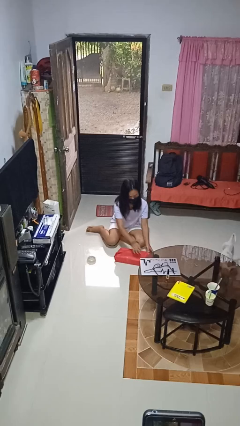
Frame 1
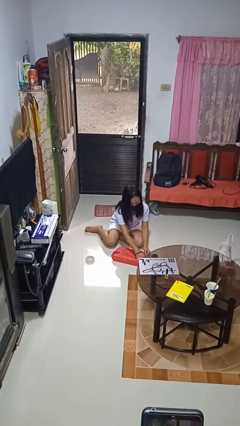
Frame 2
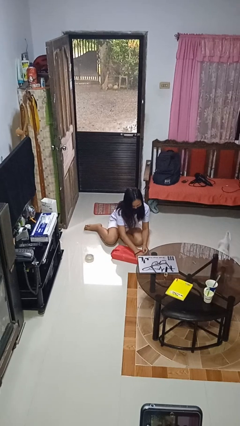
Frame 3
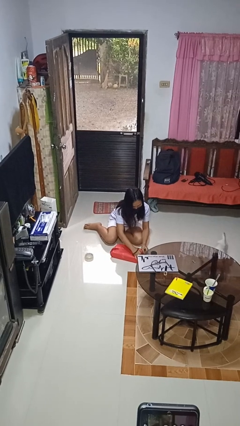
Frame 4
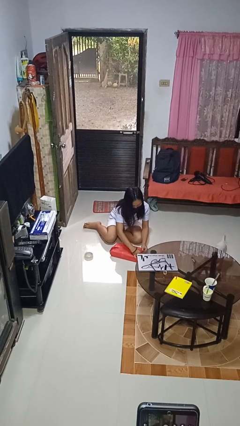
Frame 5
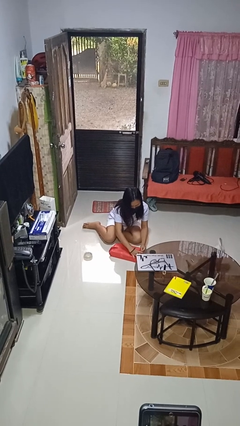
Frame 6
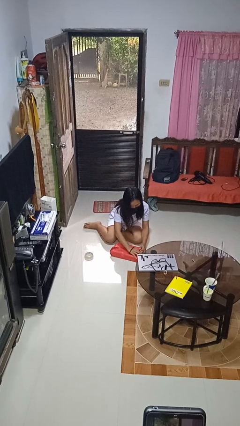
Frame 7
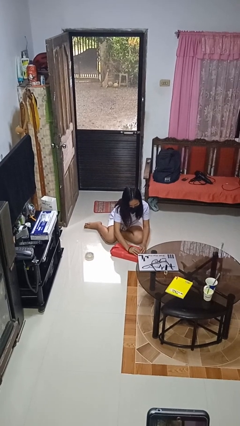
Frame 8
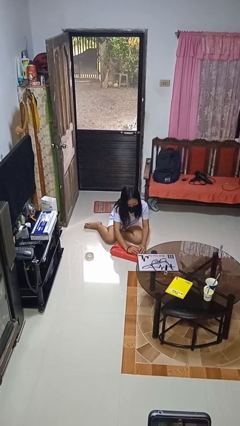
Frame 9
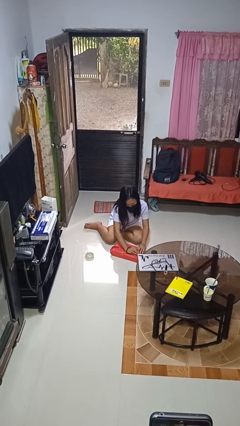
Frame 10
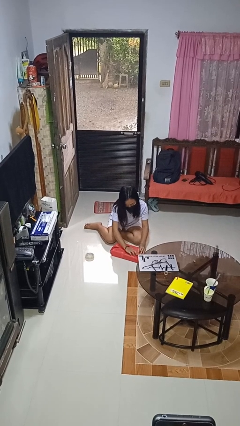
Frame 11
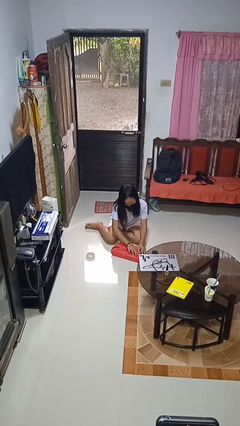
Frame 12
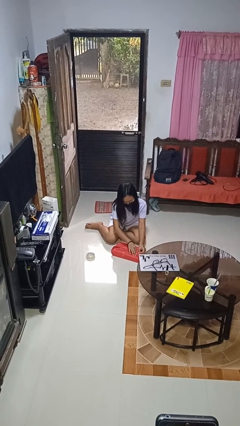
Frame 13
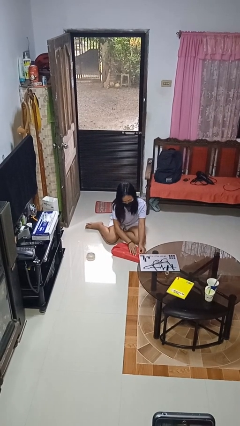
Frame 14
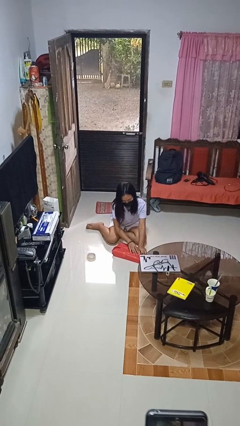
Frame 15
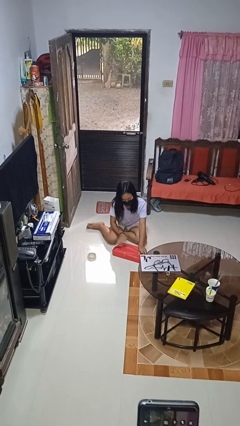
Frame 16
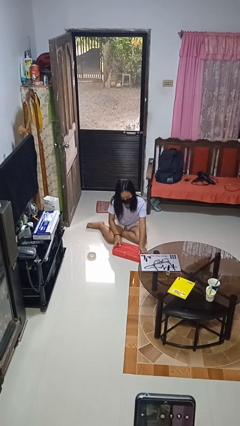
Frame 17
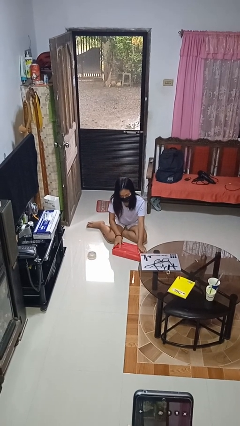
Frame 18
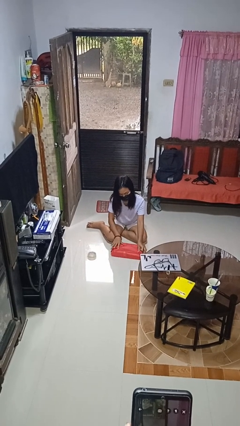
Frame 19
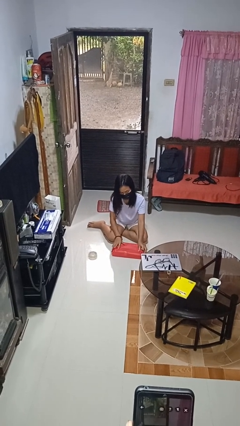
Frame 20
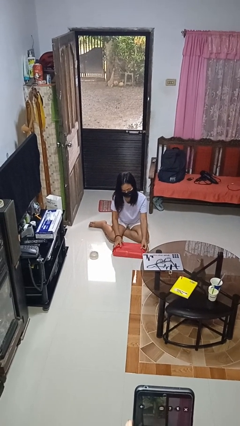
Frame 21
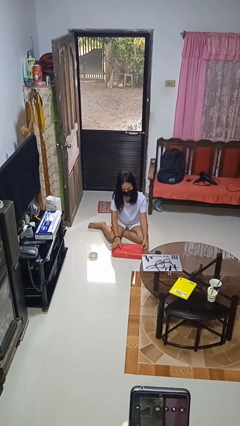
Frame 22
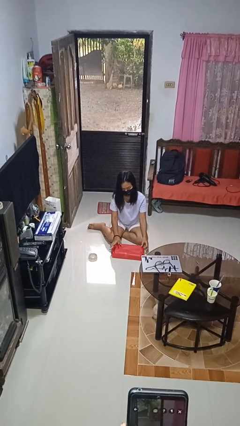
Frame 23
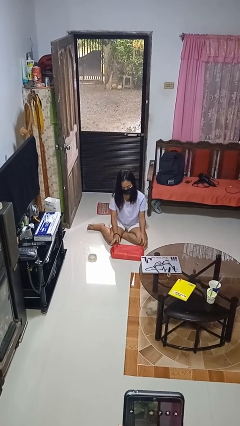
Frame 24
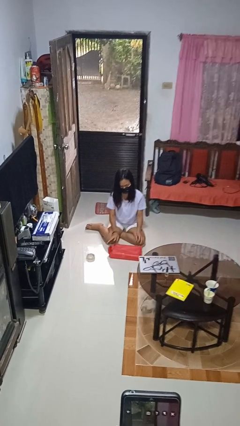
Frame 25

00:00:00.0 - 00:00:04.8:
person wraps box

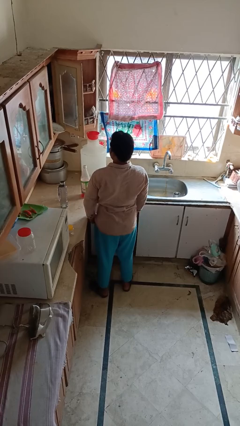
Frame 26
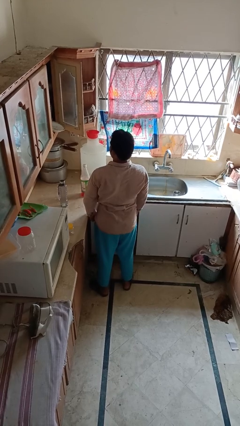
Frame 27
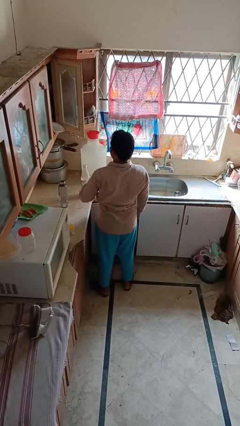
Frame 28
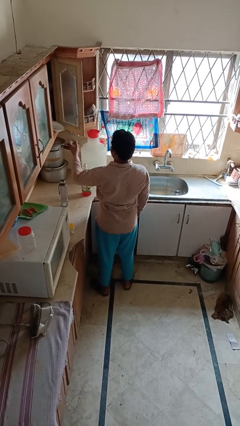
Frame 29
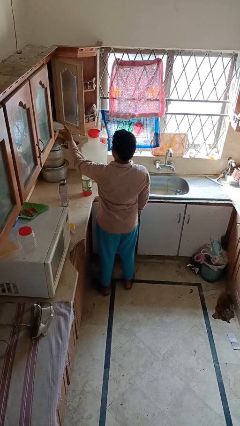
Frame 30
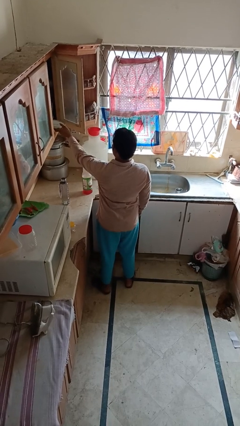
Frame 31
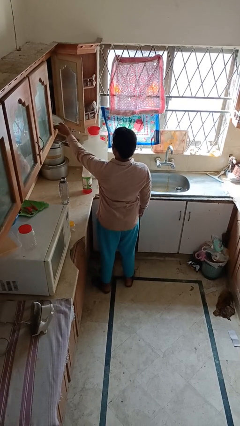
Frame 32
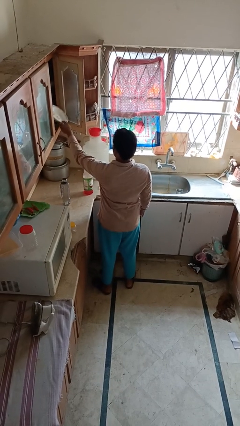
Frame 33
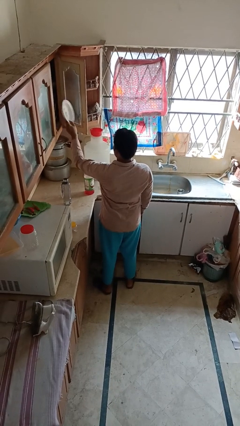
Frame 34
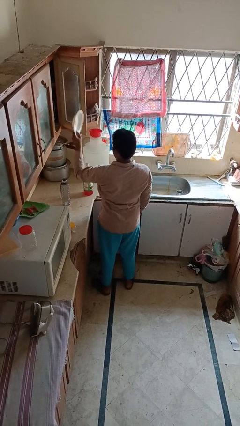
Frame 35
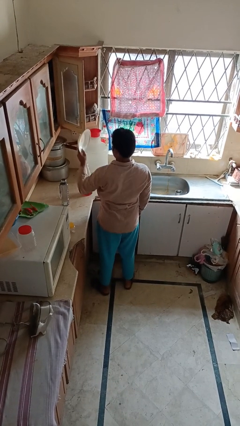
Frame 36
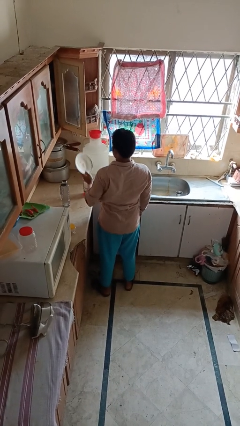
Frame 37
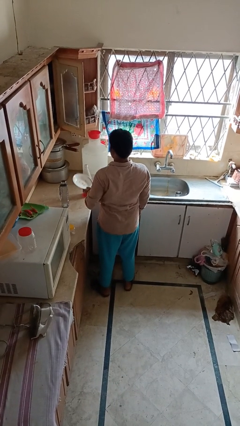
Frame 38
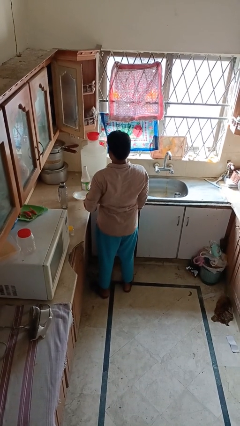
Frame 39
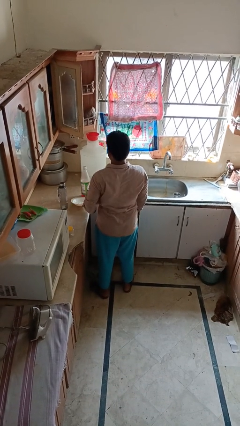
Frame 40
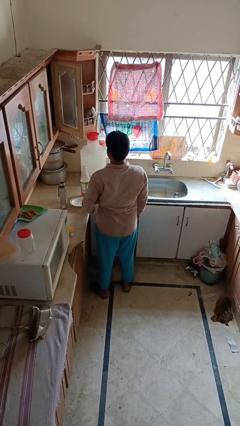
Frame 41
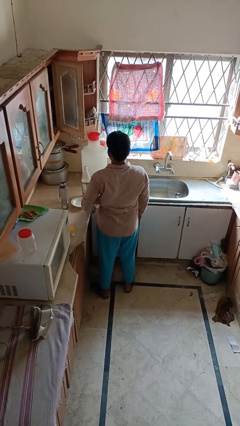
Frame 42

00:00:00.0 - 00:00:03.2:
person takes object from cabinet

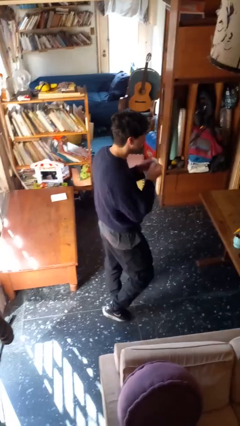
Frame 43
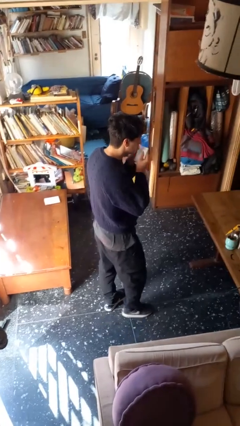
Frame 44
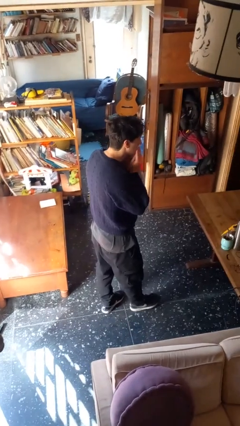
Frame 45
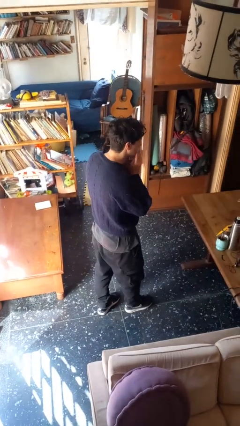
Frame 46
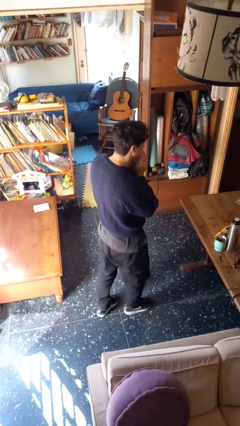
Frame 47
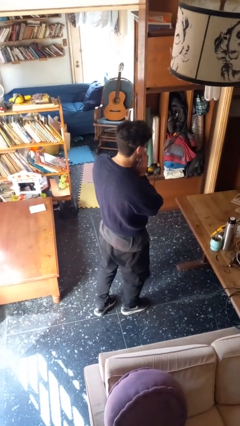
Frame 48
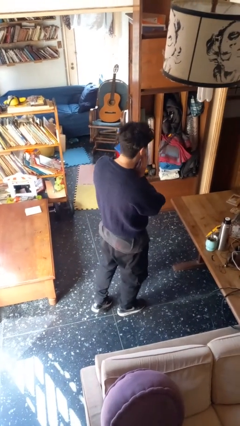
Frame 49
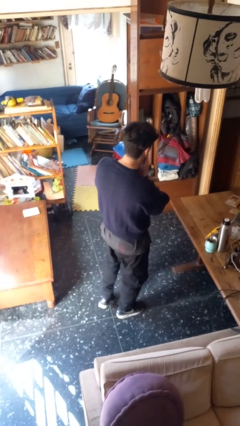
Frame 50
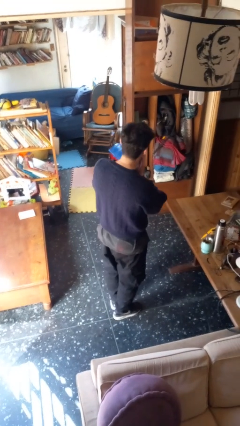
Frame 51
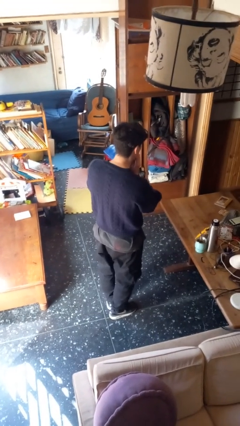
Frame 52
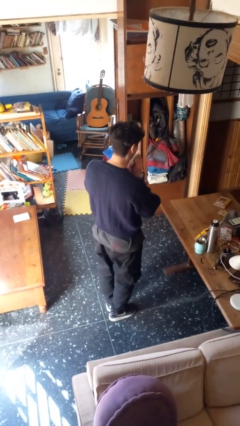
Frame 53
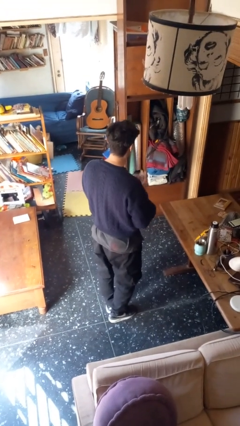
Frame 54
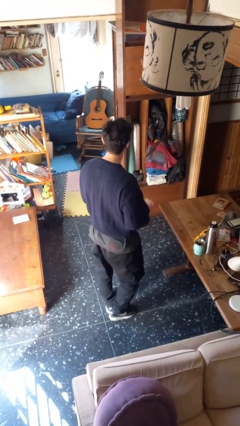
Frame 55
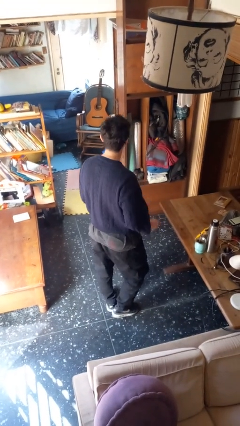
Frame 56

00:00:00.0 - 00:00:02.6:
person wipes mouth with napkin

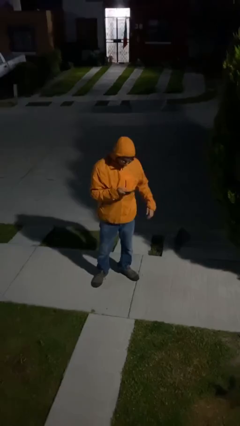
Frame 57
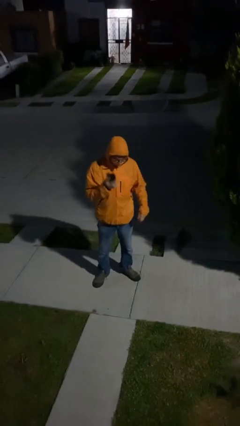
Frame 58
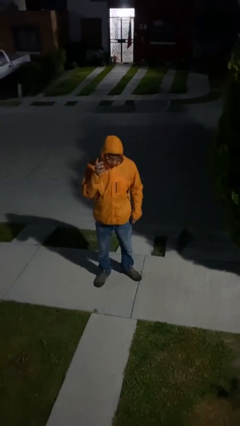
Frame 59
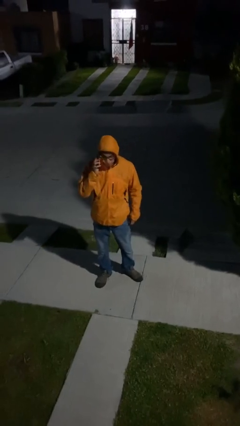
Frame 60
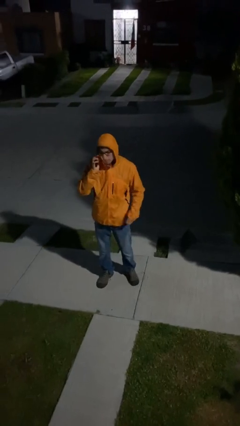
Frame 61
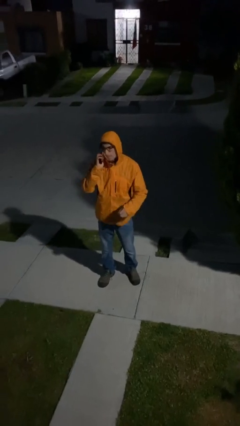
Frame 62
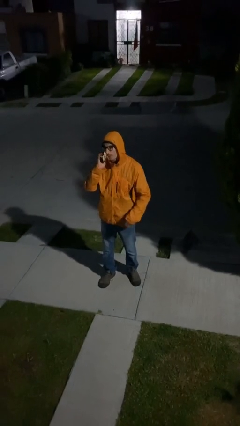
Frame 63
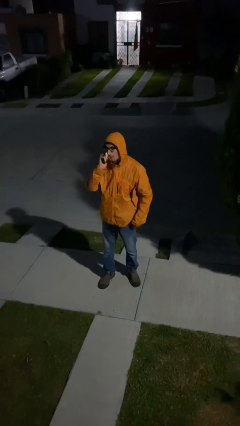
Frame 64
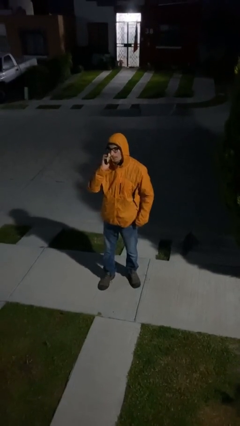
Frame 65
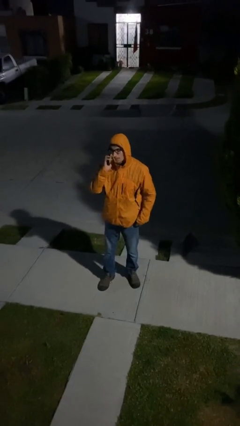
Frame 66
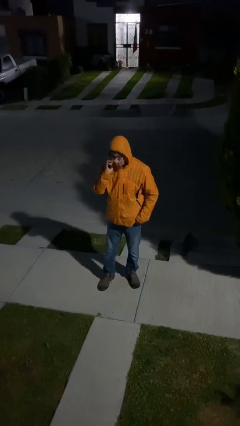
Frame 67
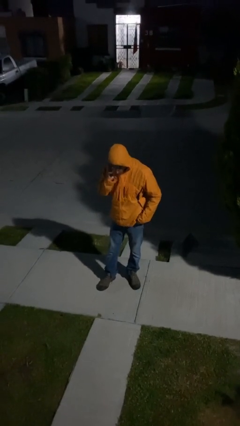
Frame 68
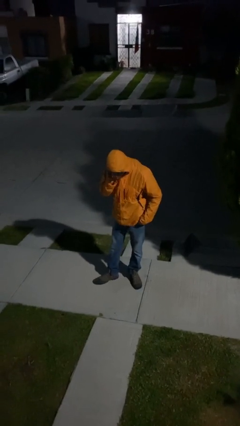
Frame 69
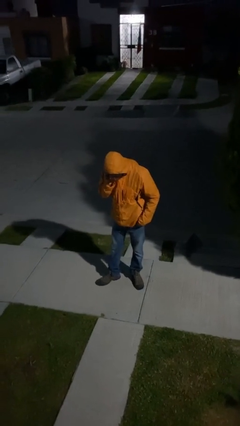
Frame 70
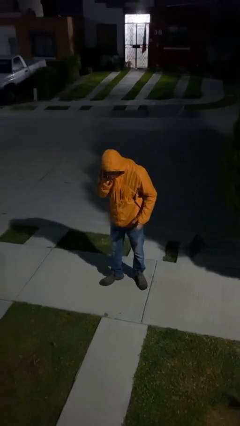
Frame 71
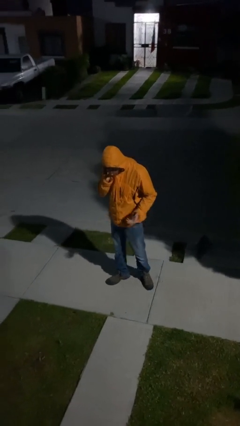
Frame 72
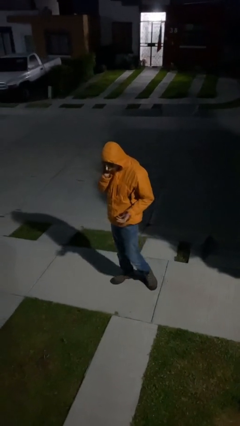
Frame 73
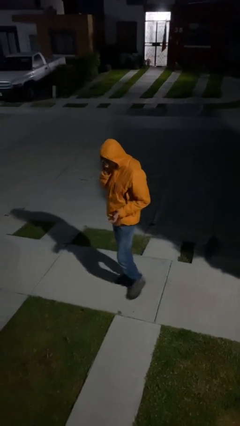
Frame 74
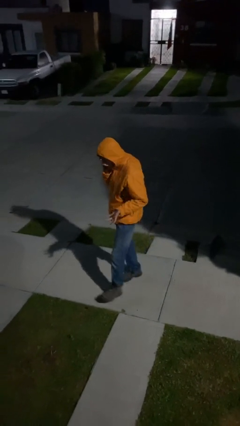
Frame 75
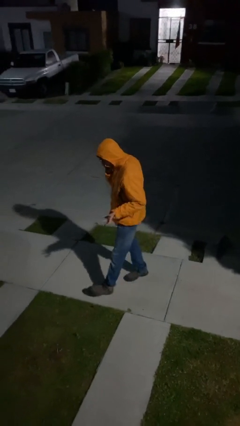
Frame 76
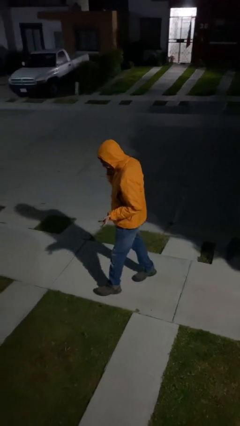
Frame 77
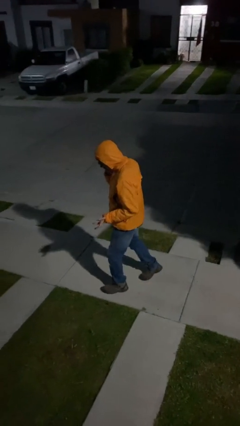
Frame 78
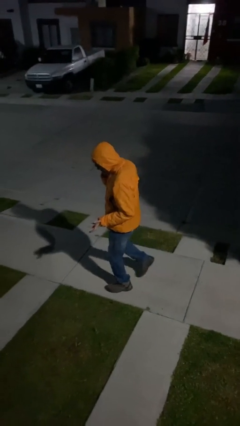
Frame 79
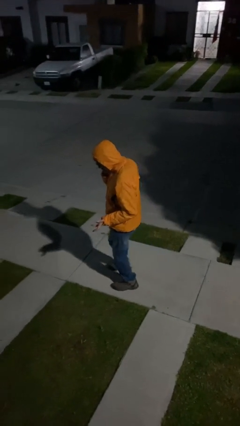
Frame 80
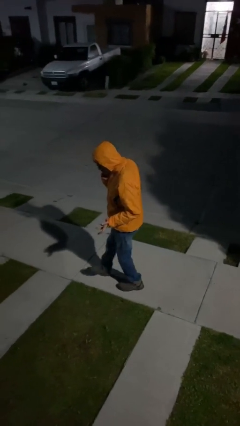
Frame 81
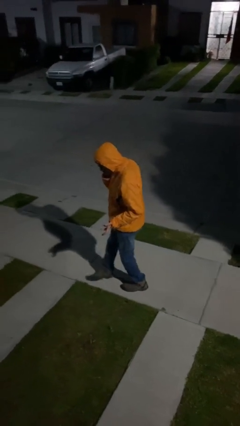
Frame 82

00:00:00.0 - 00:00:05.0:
person talks on phone

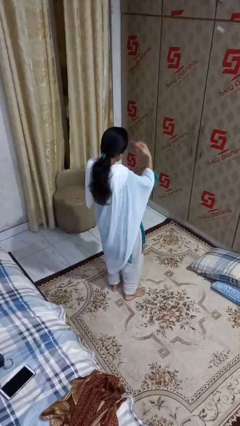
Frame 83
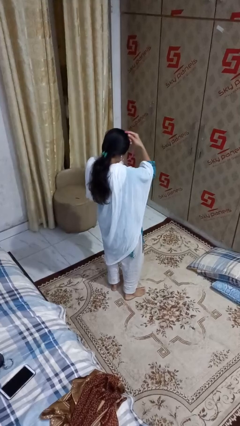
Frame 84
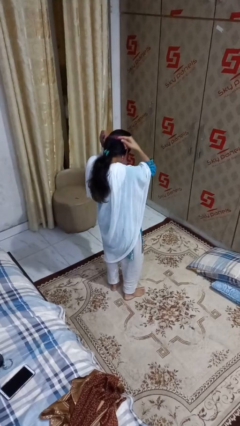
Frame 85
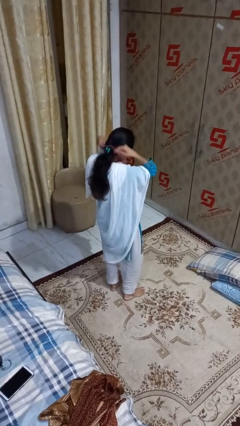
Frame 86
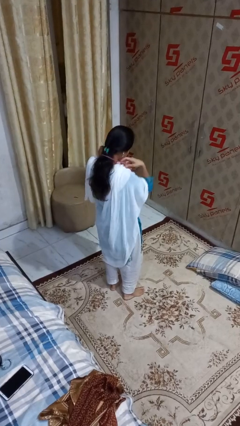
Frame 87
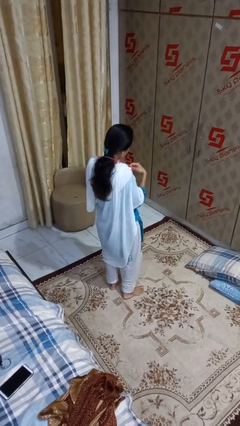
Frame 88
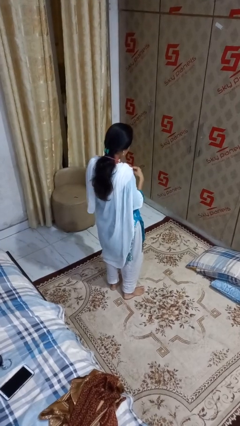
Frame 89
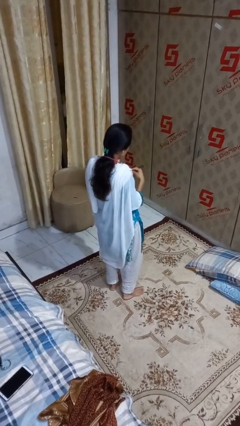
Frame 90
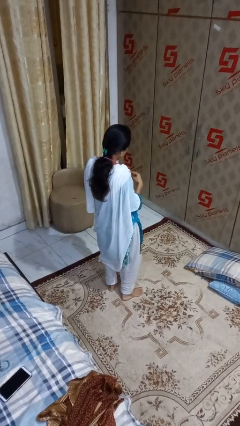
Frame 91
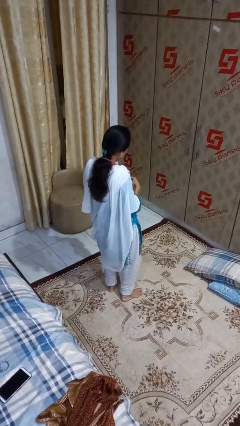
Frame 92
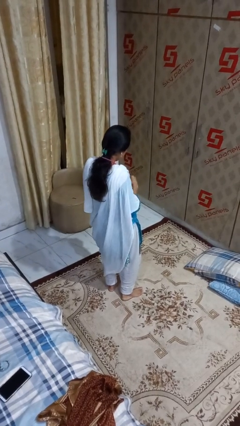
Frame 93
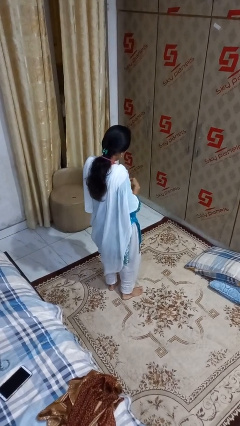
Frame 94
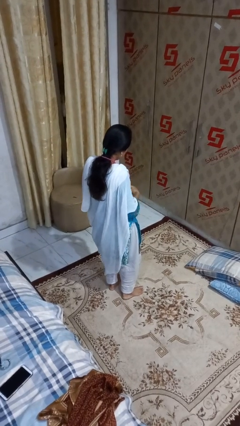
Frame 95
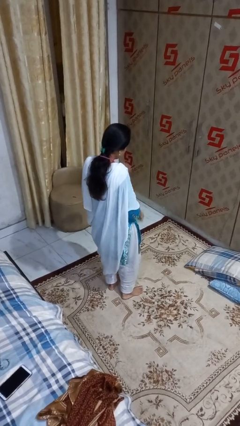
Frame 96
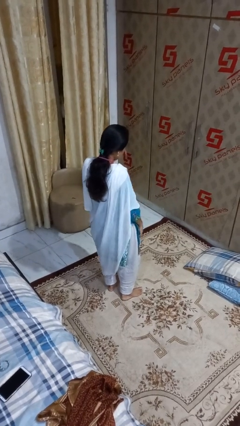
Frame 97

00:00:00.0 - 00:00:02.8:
person puts on necklace
